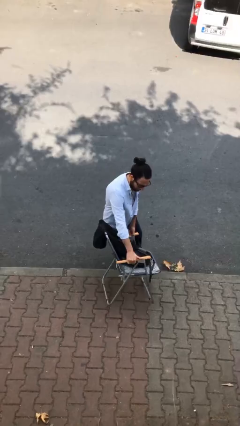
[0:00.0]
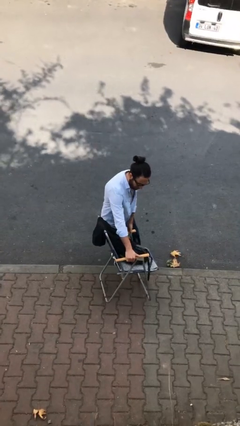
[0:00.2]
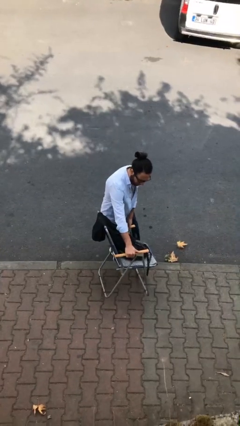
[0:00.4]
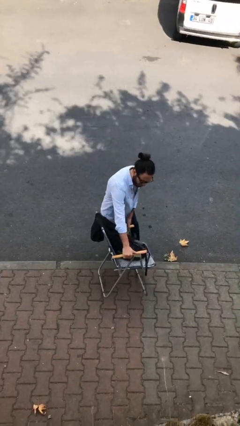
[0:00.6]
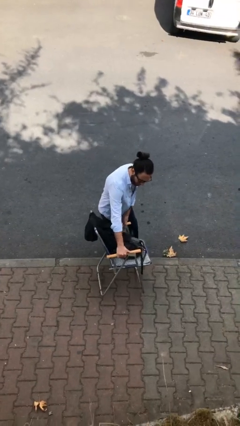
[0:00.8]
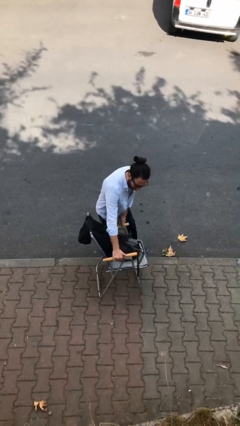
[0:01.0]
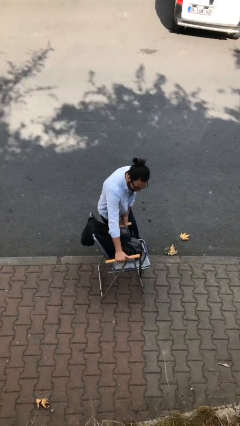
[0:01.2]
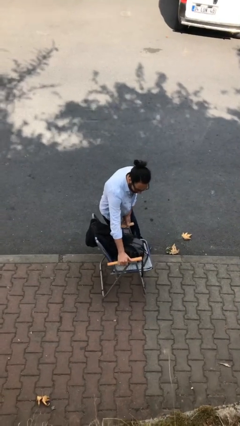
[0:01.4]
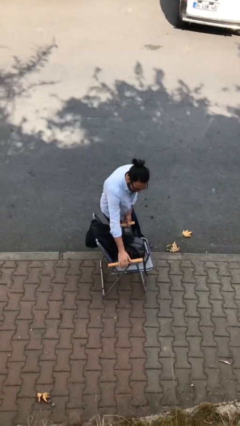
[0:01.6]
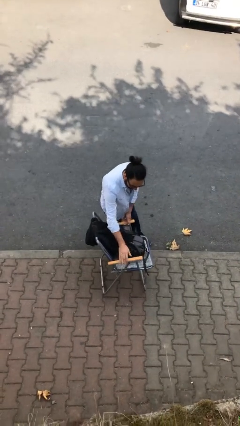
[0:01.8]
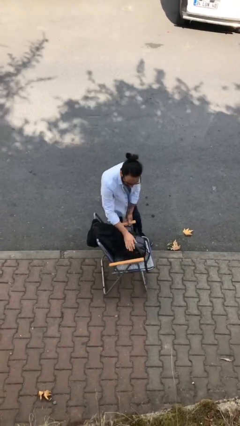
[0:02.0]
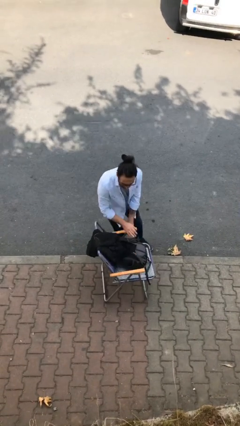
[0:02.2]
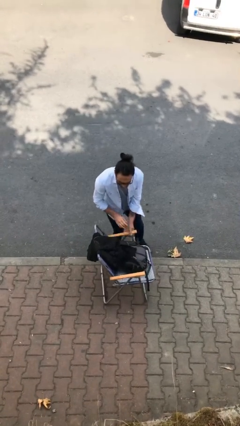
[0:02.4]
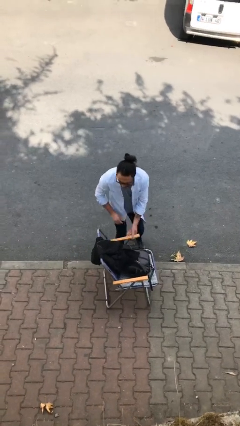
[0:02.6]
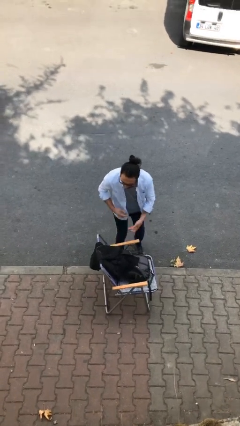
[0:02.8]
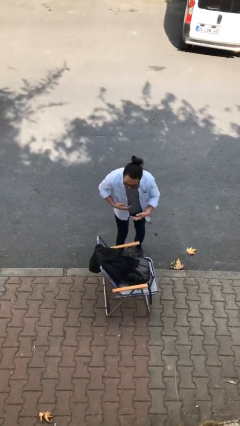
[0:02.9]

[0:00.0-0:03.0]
person puts down object on floor

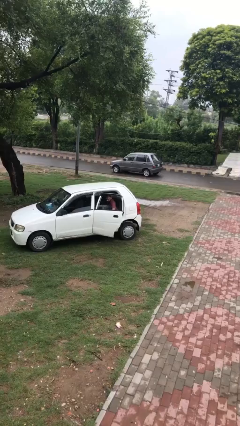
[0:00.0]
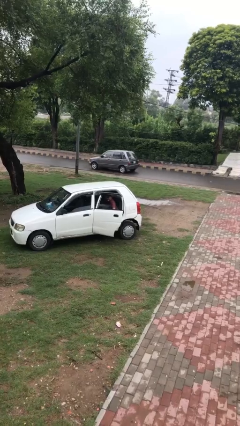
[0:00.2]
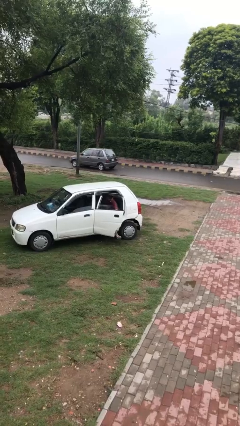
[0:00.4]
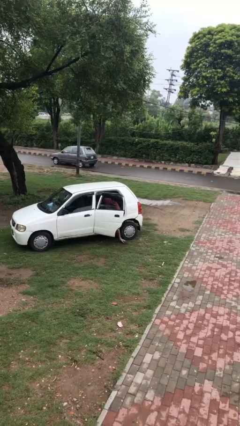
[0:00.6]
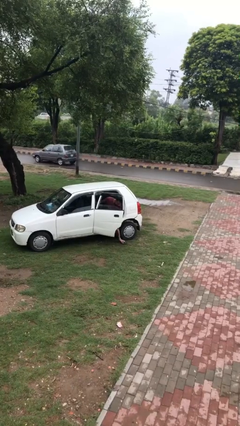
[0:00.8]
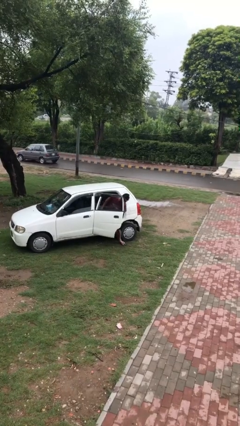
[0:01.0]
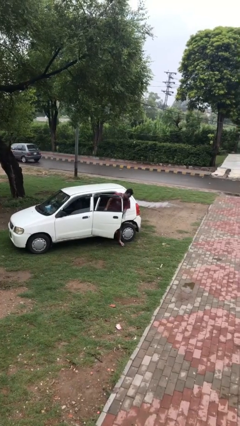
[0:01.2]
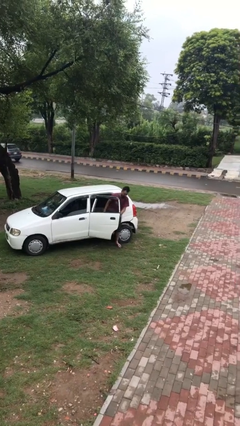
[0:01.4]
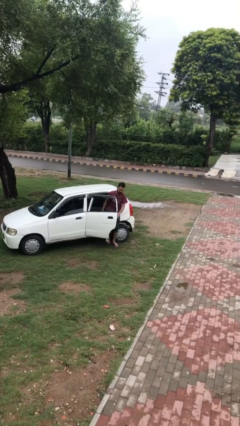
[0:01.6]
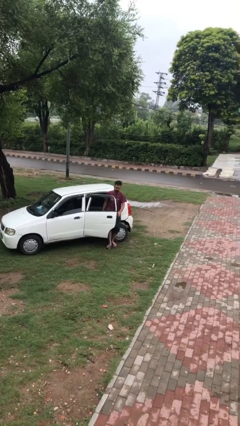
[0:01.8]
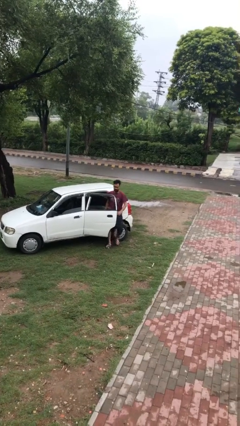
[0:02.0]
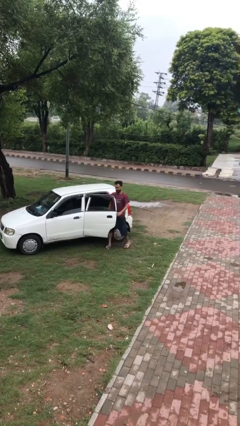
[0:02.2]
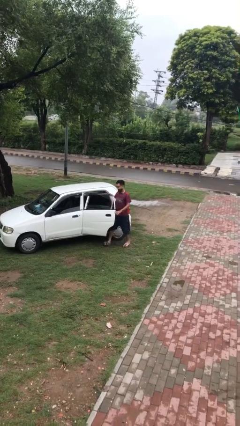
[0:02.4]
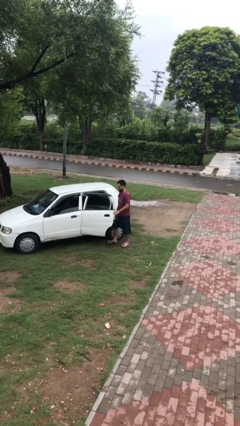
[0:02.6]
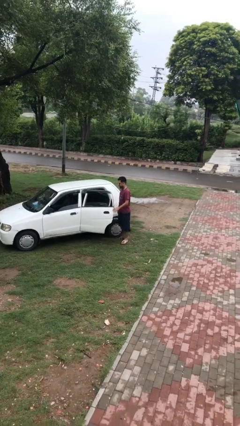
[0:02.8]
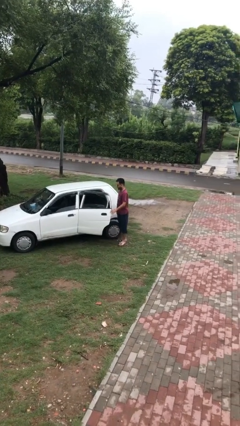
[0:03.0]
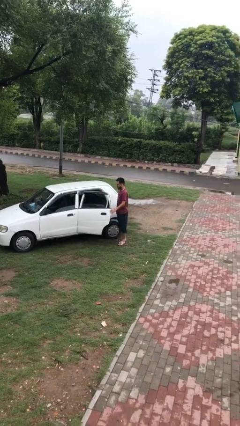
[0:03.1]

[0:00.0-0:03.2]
person exits car

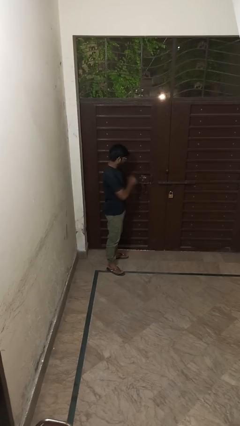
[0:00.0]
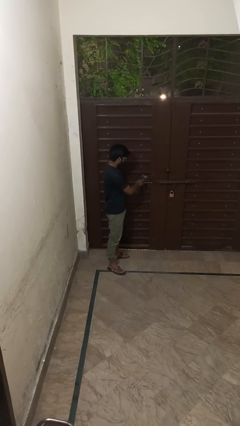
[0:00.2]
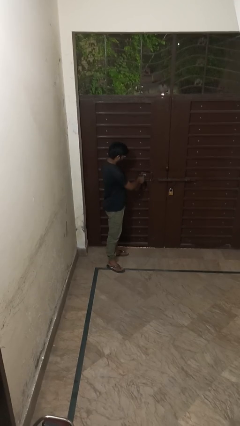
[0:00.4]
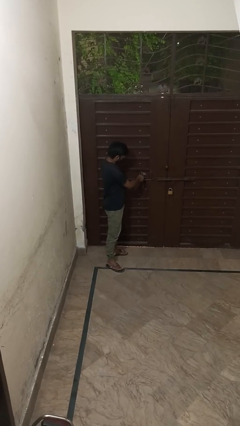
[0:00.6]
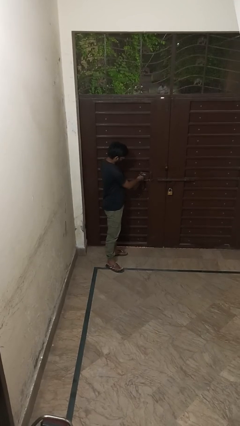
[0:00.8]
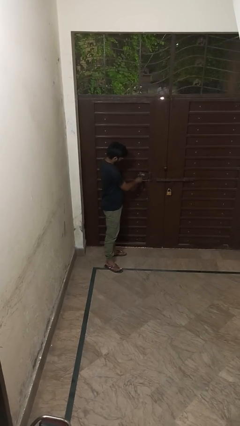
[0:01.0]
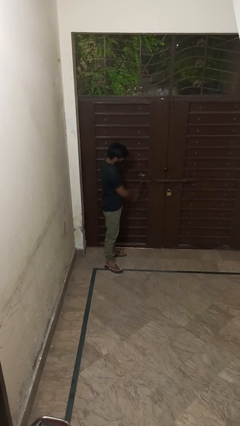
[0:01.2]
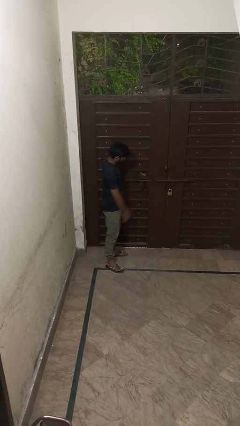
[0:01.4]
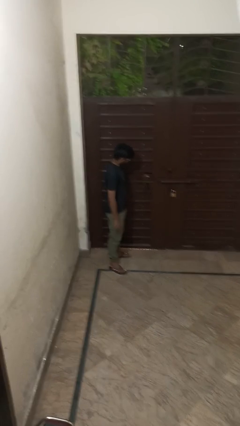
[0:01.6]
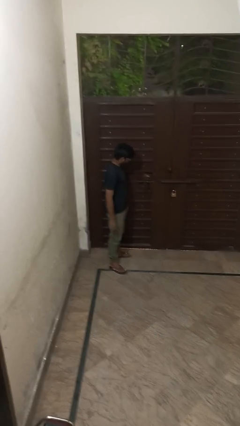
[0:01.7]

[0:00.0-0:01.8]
person locks door with keys

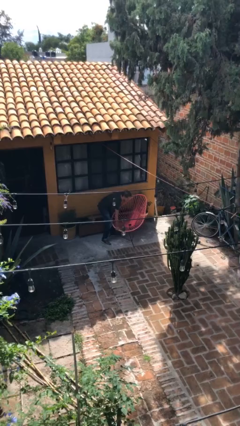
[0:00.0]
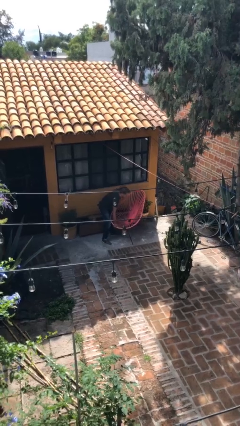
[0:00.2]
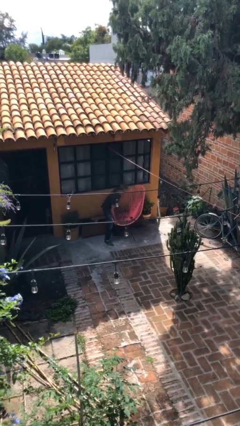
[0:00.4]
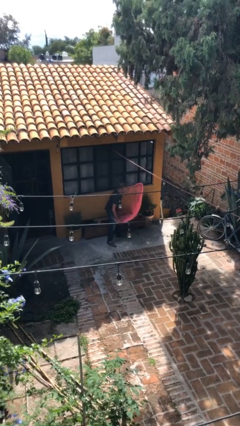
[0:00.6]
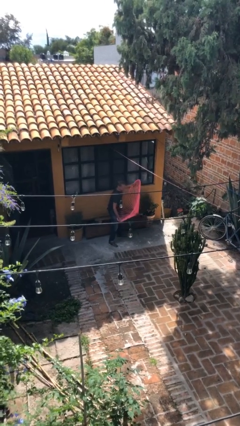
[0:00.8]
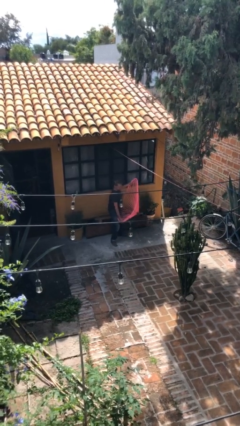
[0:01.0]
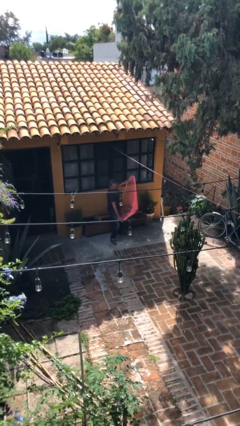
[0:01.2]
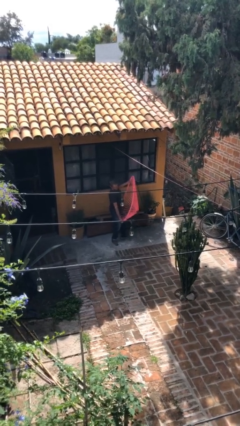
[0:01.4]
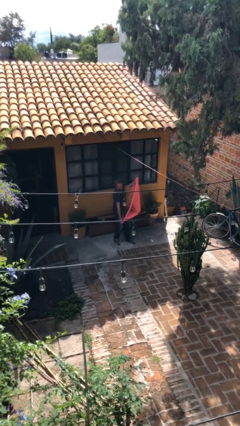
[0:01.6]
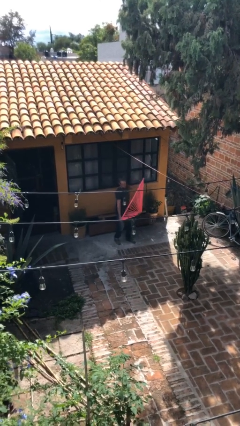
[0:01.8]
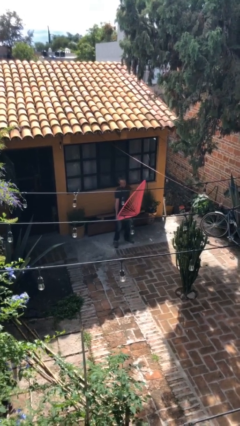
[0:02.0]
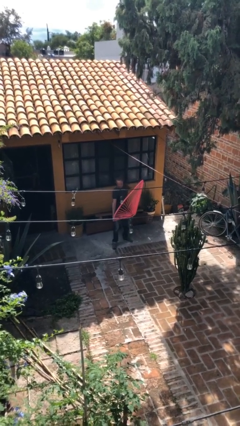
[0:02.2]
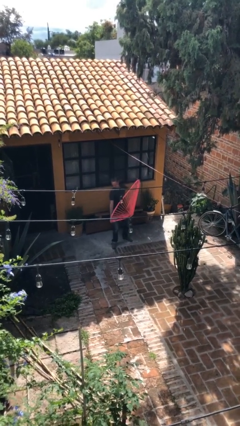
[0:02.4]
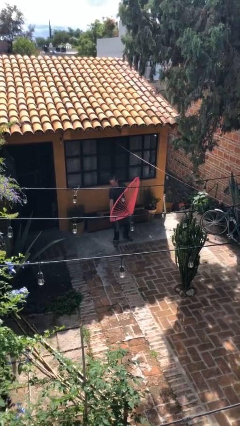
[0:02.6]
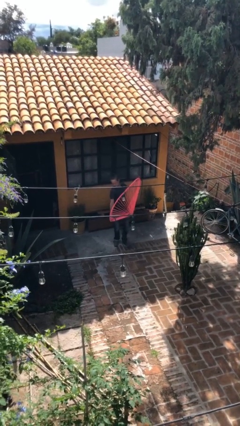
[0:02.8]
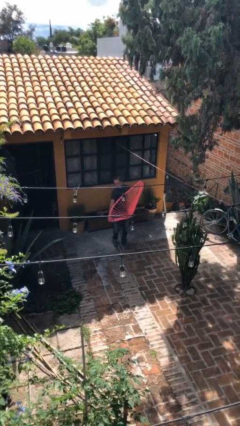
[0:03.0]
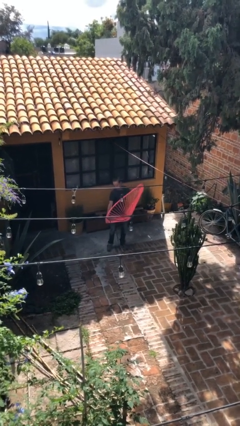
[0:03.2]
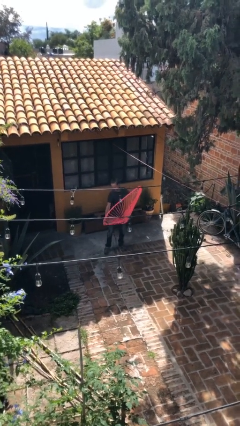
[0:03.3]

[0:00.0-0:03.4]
person carries heavy object

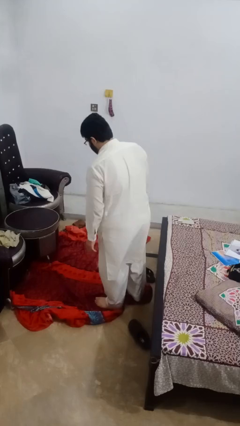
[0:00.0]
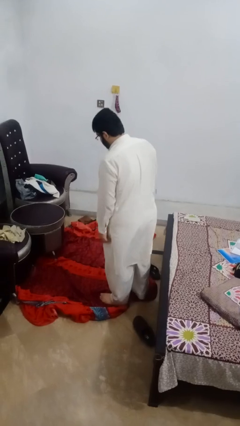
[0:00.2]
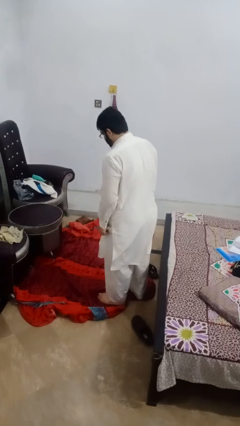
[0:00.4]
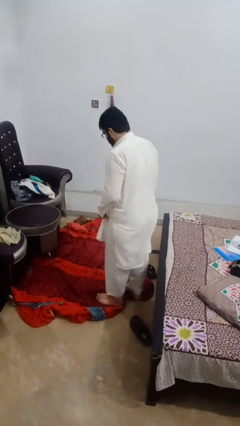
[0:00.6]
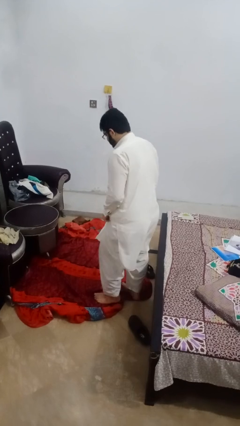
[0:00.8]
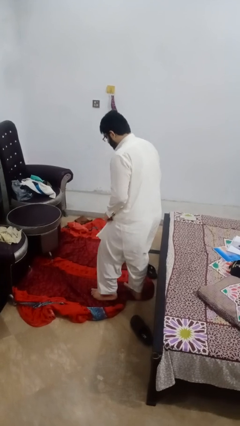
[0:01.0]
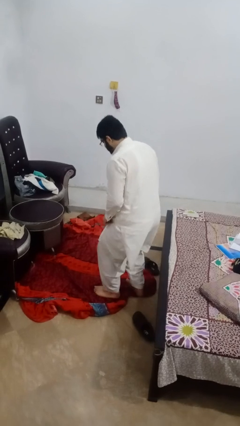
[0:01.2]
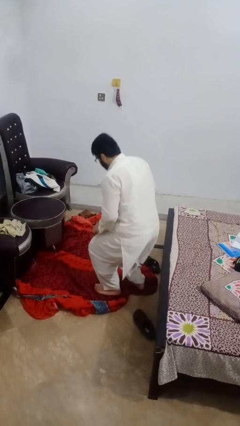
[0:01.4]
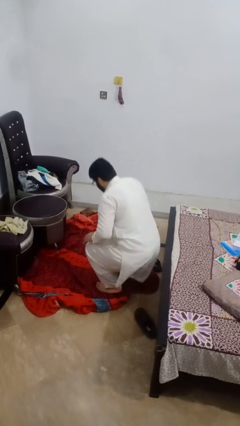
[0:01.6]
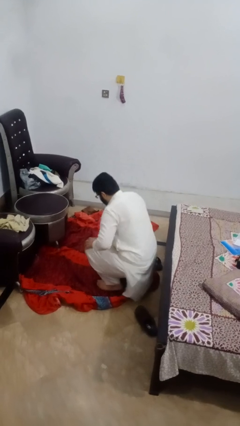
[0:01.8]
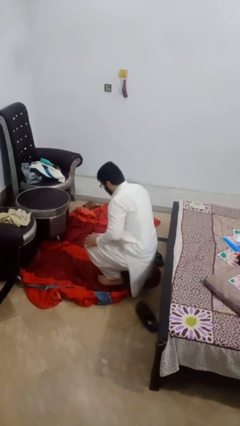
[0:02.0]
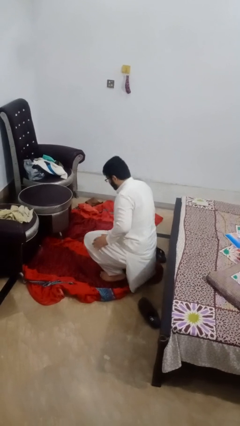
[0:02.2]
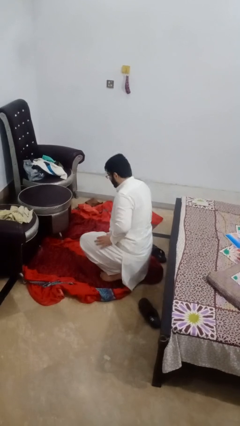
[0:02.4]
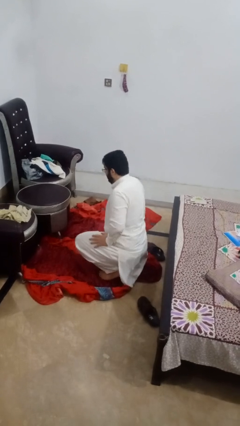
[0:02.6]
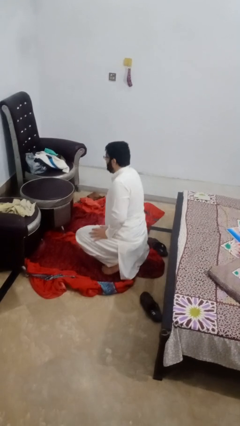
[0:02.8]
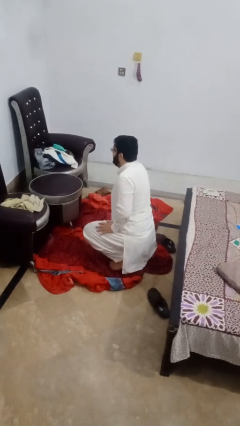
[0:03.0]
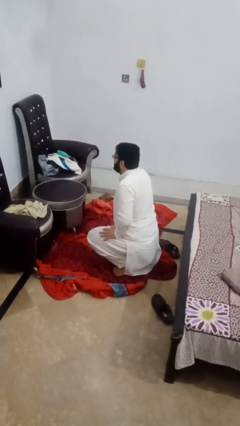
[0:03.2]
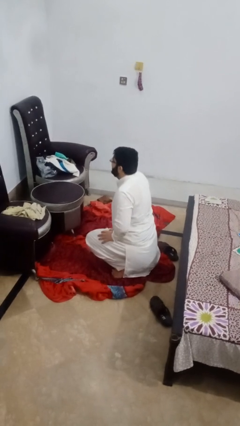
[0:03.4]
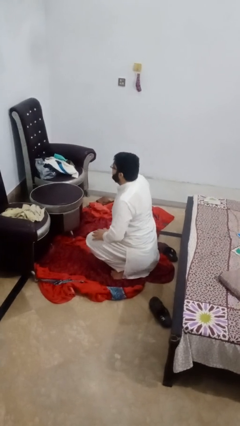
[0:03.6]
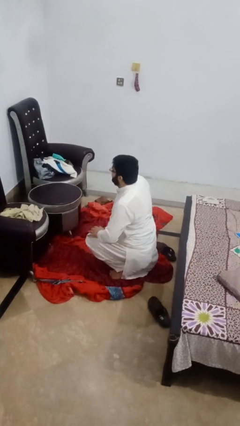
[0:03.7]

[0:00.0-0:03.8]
person kneels

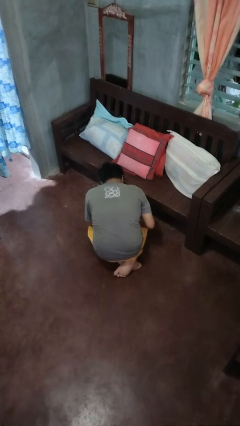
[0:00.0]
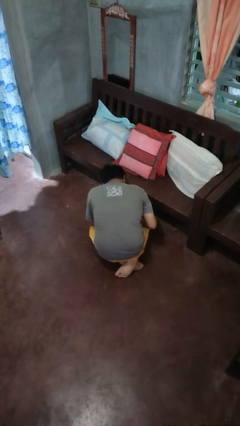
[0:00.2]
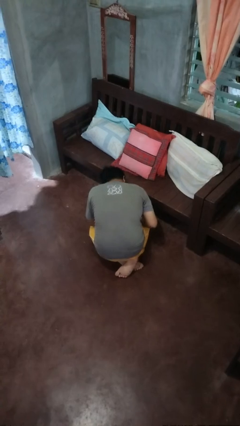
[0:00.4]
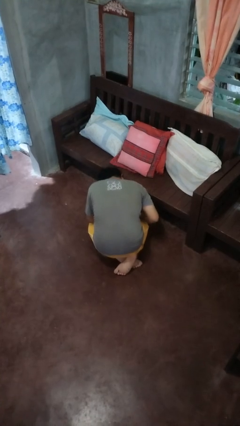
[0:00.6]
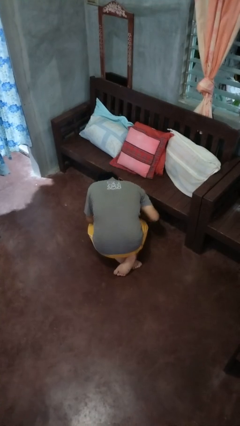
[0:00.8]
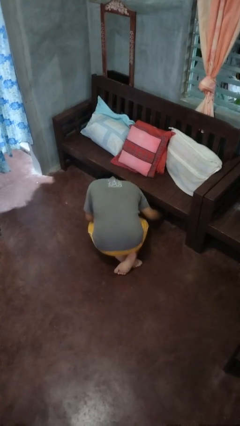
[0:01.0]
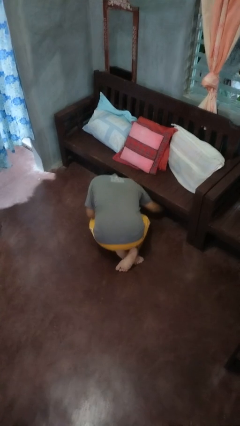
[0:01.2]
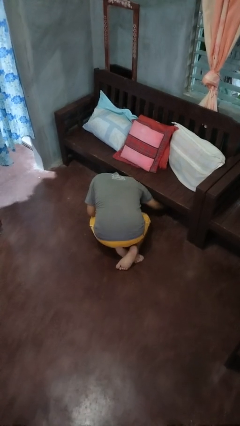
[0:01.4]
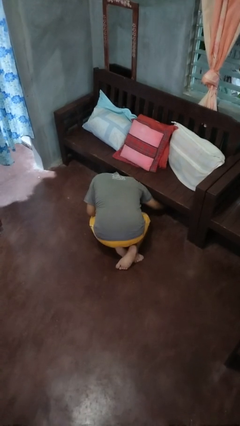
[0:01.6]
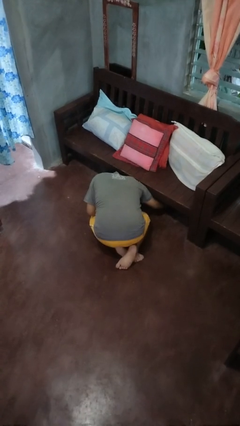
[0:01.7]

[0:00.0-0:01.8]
person searches under couch

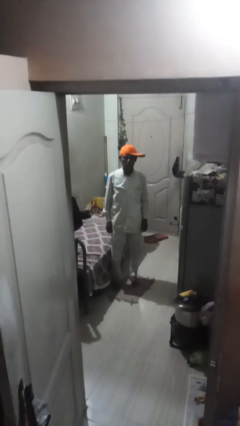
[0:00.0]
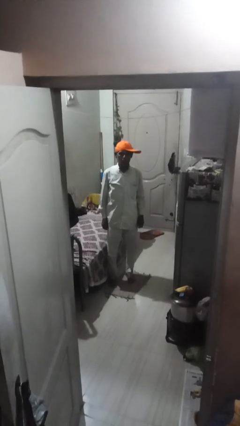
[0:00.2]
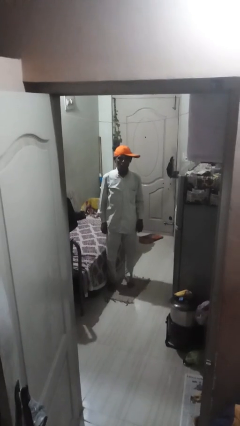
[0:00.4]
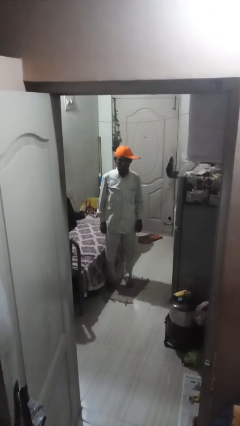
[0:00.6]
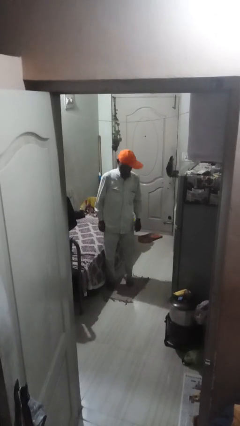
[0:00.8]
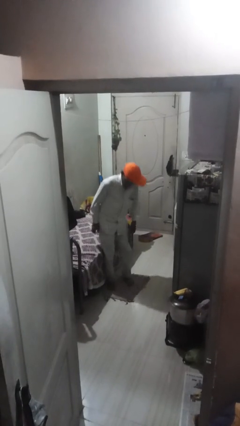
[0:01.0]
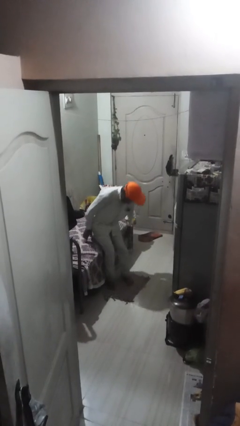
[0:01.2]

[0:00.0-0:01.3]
person lies down on bed
